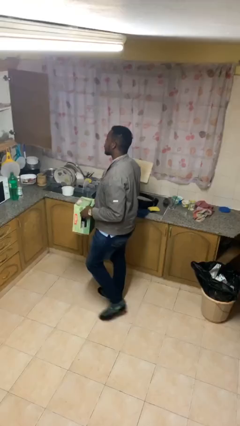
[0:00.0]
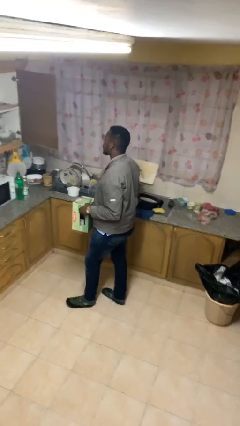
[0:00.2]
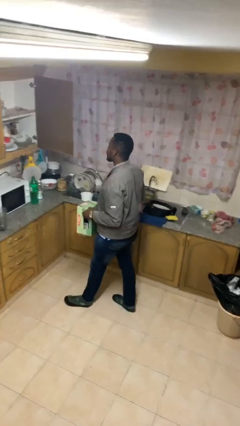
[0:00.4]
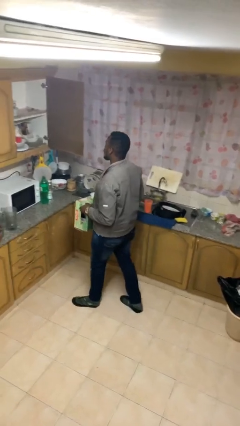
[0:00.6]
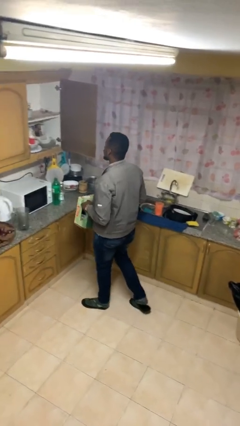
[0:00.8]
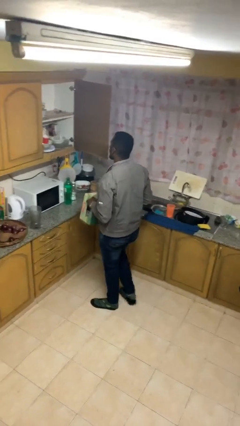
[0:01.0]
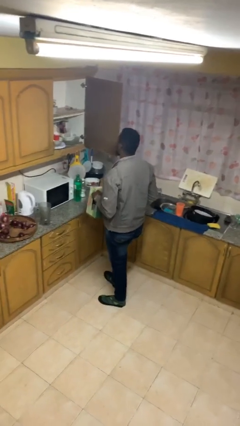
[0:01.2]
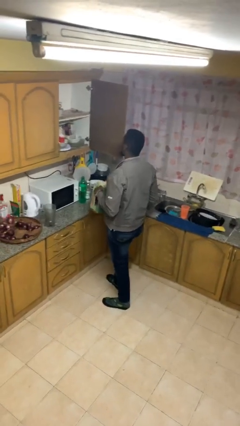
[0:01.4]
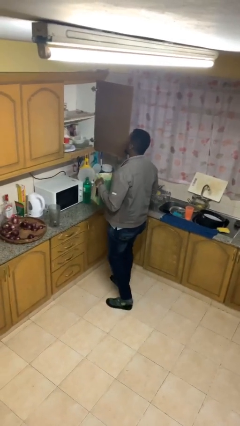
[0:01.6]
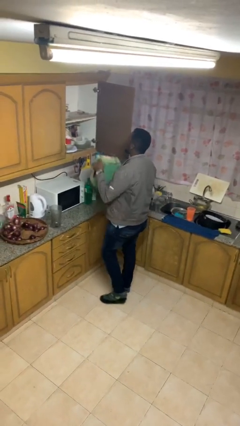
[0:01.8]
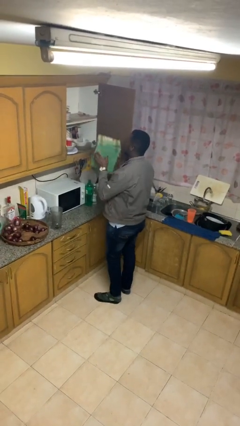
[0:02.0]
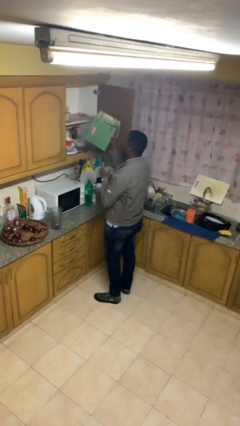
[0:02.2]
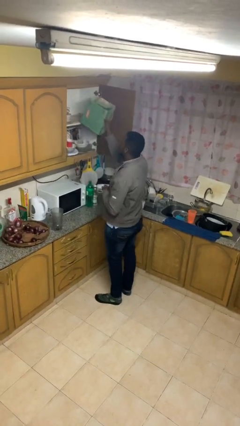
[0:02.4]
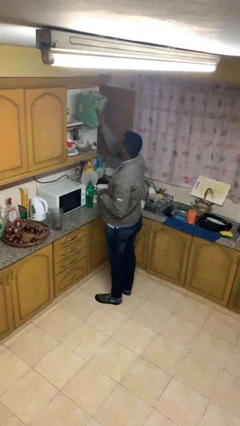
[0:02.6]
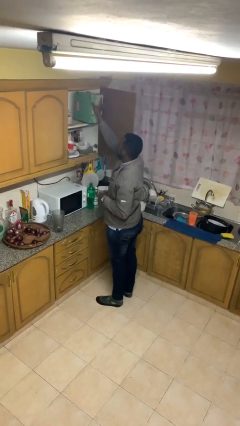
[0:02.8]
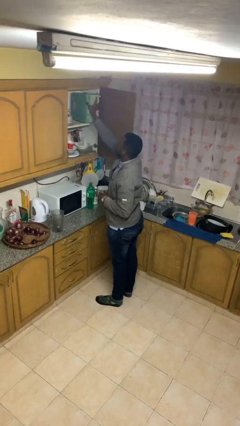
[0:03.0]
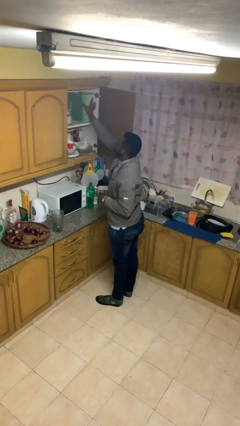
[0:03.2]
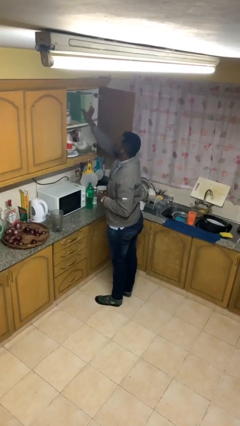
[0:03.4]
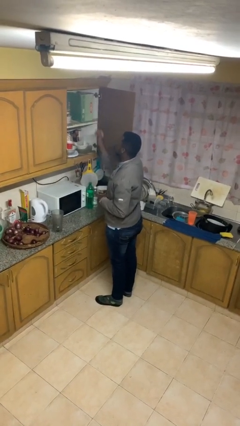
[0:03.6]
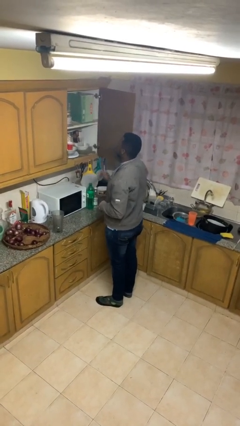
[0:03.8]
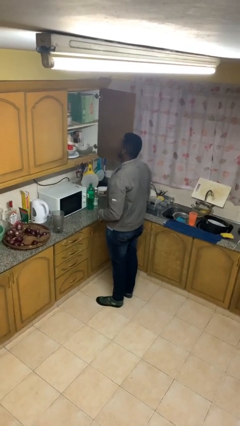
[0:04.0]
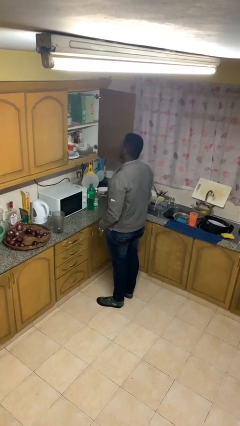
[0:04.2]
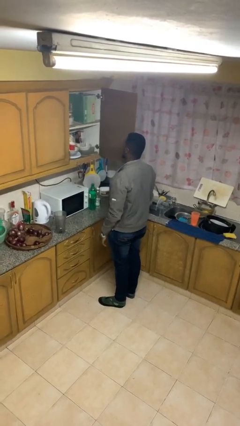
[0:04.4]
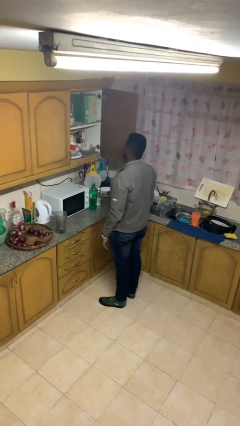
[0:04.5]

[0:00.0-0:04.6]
person puts down object on shelf

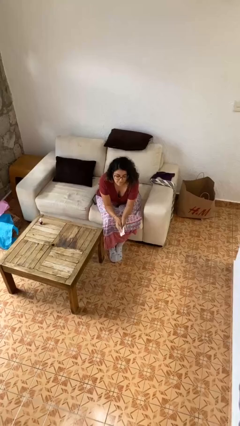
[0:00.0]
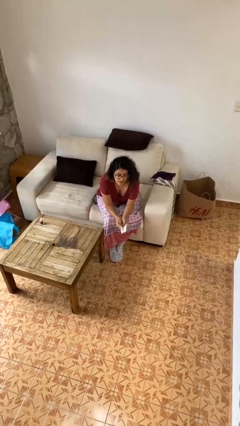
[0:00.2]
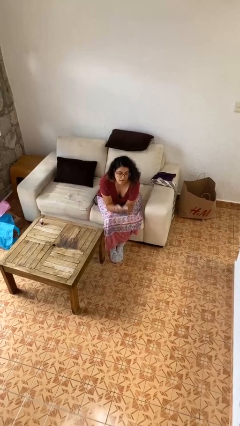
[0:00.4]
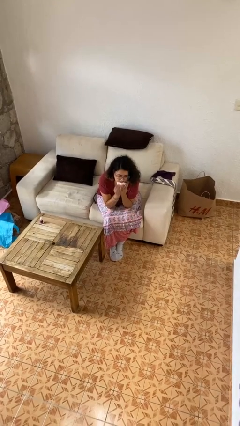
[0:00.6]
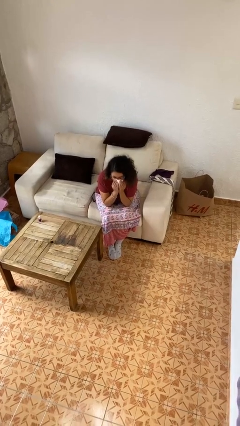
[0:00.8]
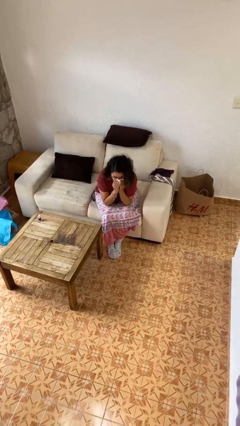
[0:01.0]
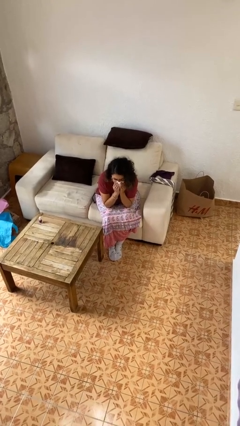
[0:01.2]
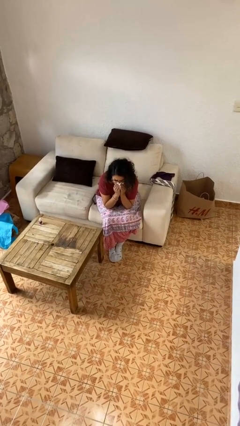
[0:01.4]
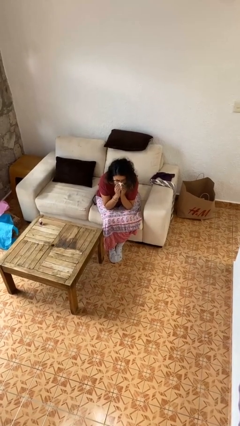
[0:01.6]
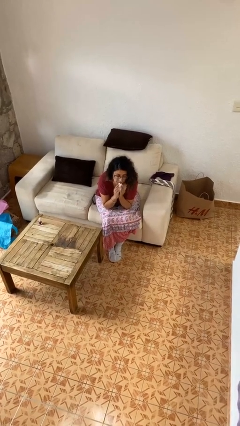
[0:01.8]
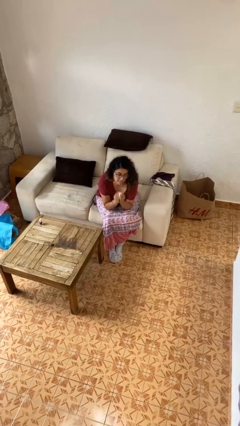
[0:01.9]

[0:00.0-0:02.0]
person blows nose

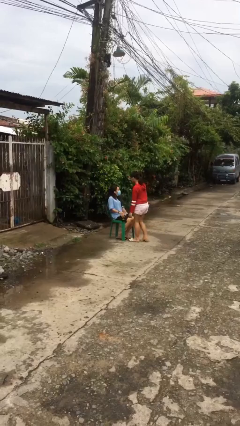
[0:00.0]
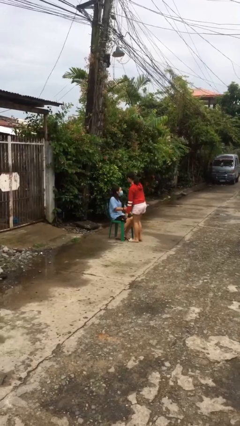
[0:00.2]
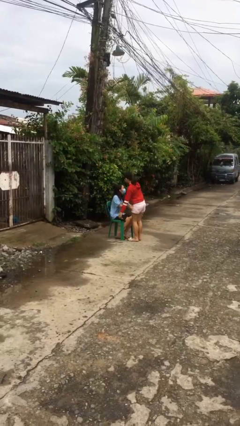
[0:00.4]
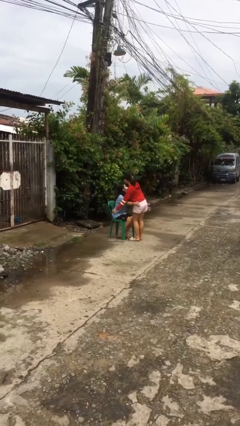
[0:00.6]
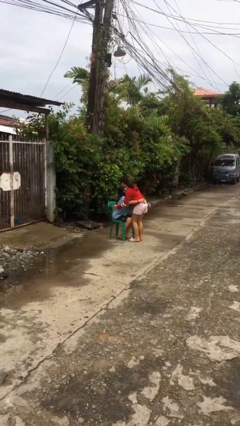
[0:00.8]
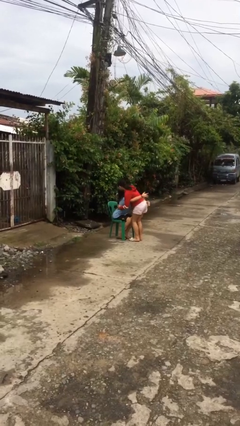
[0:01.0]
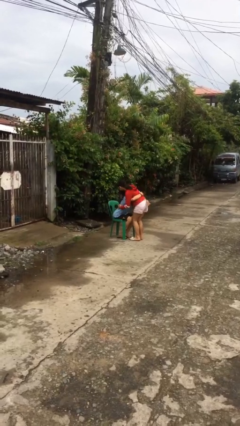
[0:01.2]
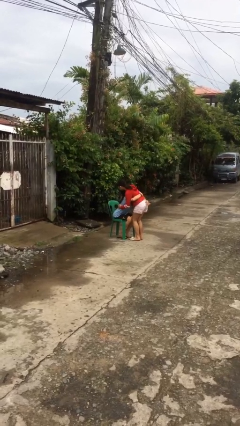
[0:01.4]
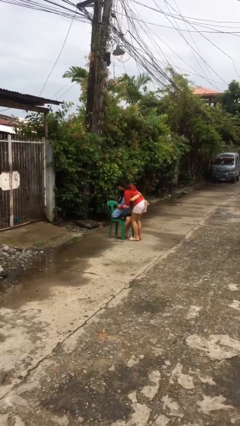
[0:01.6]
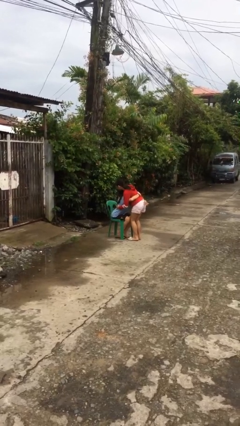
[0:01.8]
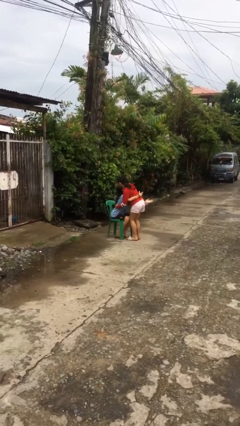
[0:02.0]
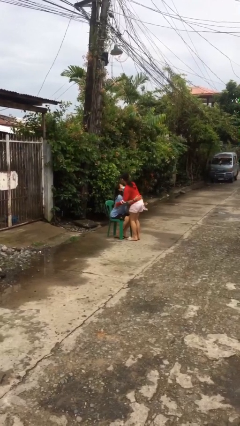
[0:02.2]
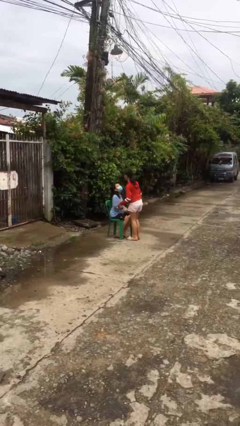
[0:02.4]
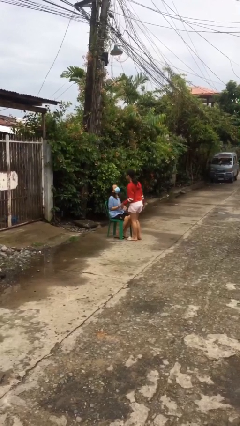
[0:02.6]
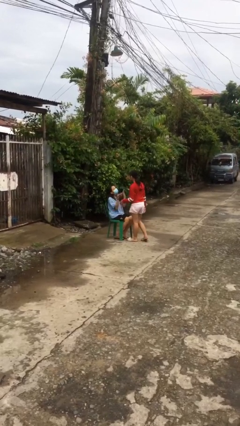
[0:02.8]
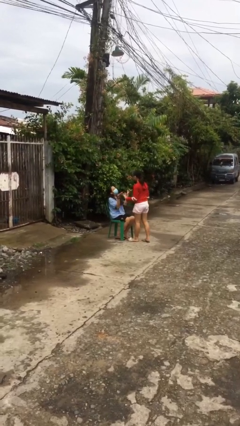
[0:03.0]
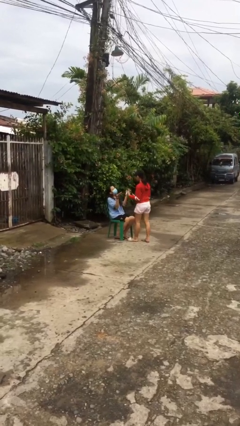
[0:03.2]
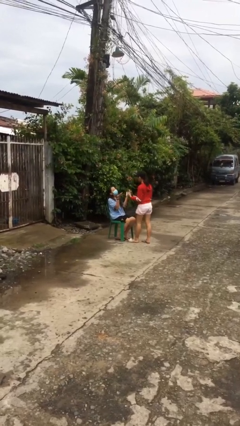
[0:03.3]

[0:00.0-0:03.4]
person embraces person

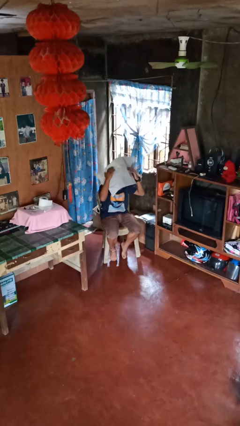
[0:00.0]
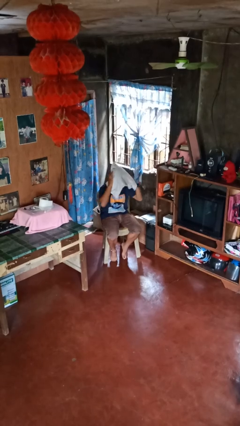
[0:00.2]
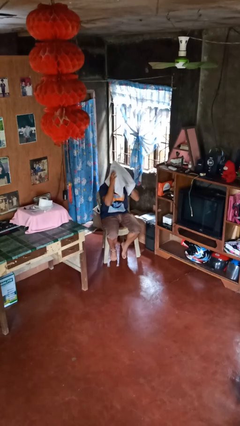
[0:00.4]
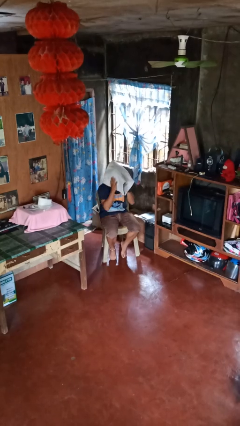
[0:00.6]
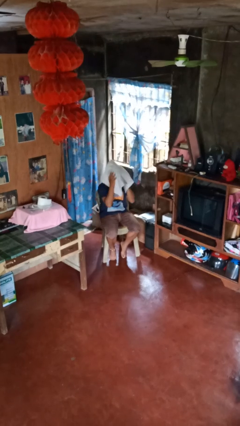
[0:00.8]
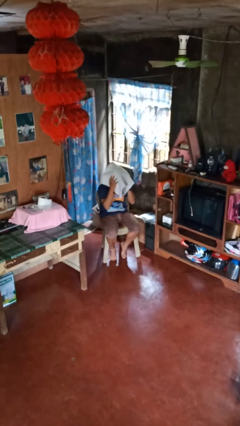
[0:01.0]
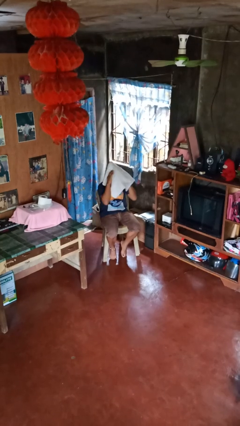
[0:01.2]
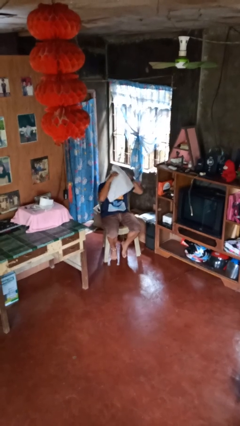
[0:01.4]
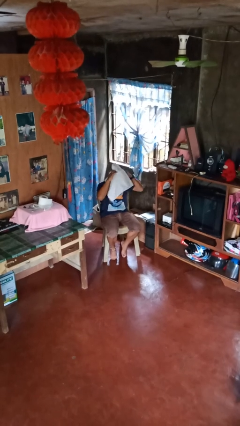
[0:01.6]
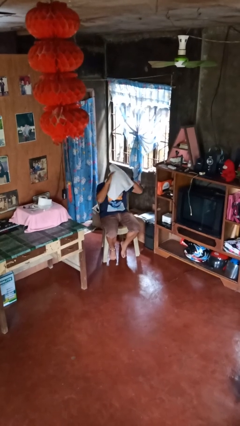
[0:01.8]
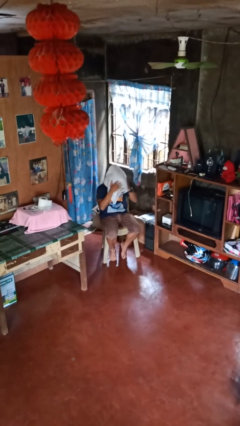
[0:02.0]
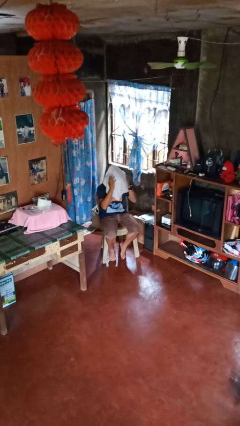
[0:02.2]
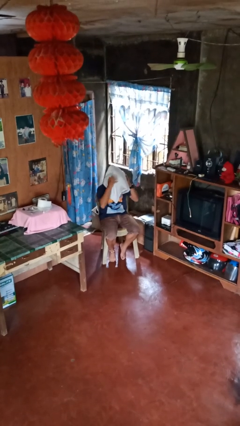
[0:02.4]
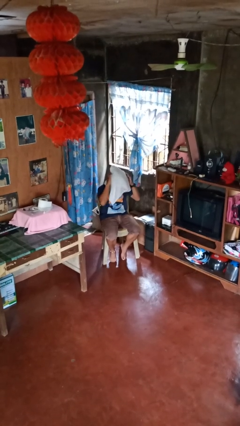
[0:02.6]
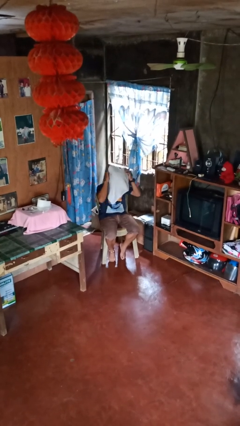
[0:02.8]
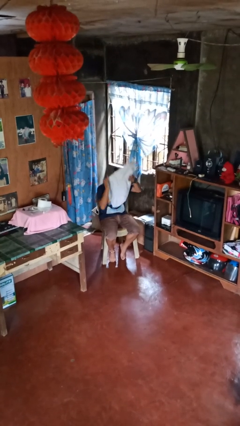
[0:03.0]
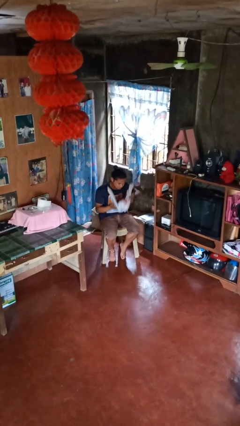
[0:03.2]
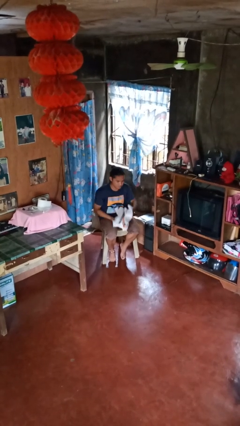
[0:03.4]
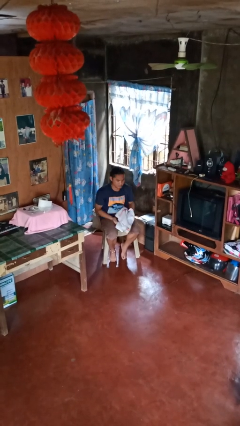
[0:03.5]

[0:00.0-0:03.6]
person dries hair with towel

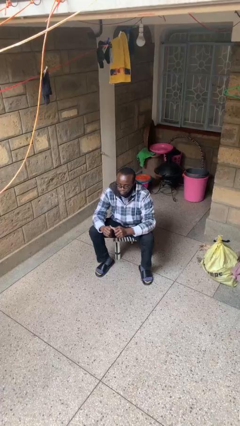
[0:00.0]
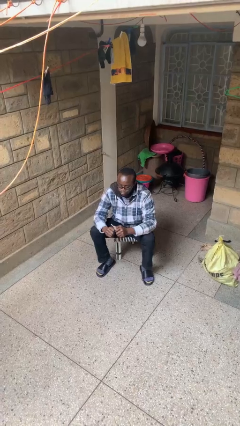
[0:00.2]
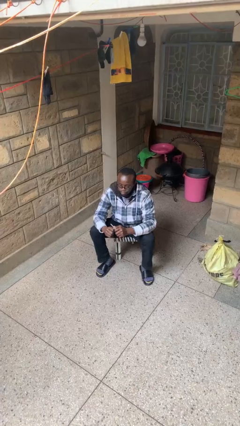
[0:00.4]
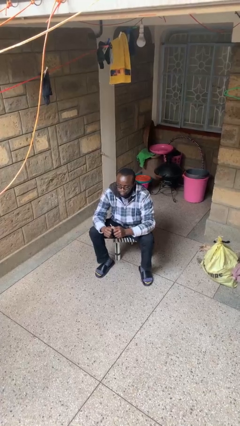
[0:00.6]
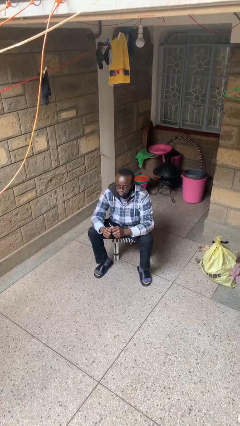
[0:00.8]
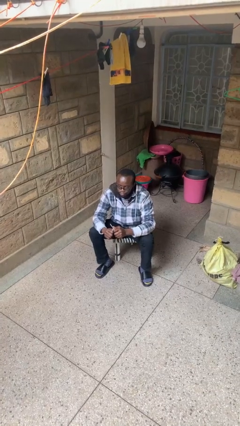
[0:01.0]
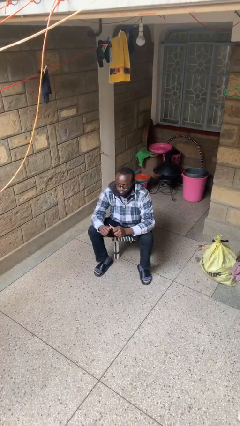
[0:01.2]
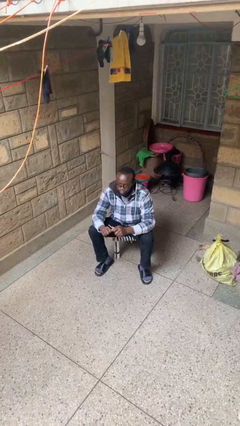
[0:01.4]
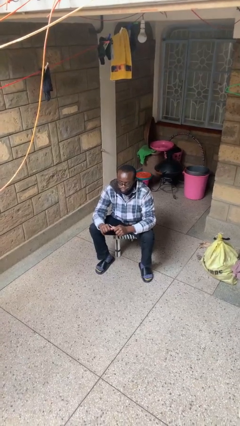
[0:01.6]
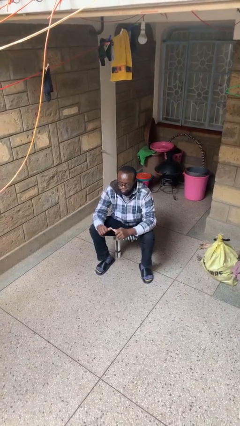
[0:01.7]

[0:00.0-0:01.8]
person files fingernails

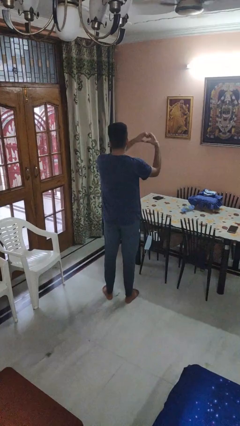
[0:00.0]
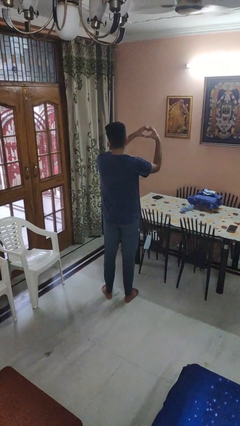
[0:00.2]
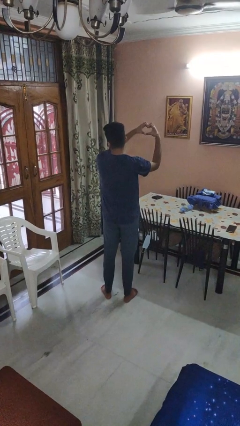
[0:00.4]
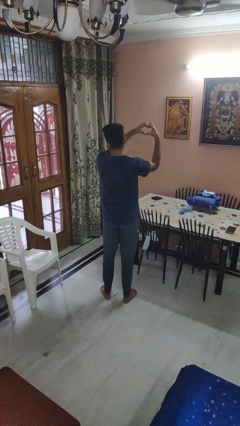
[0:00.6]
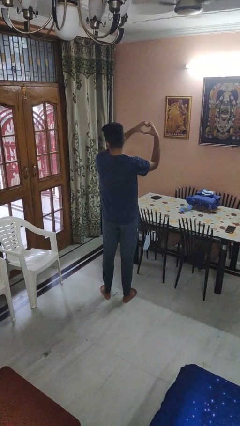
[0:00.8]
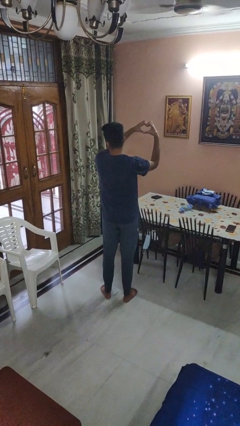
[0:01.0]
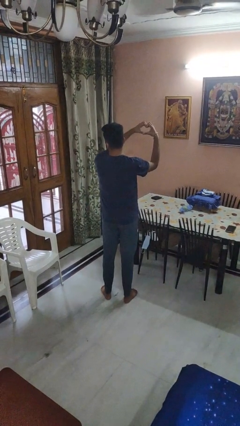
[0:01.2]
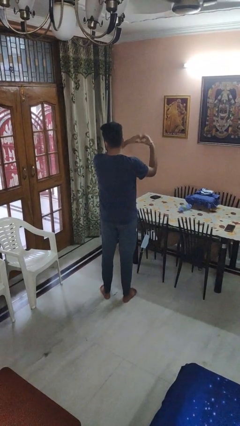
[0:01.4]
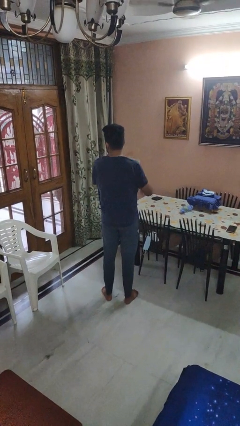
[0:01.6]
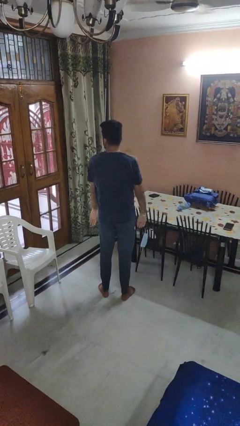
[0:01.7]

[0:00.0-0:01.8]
person gestures heart

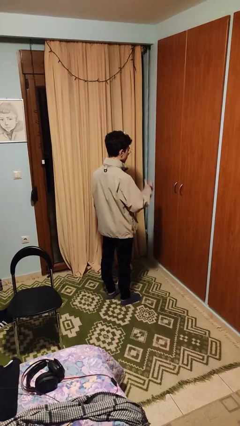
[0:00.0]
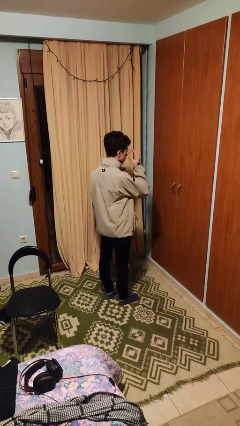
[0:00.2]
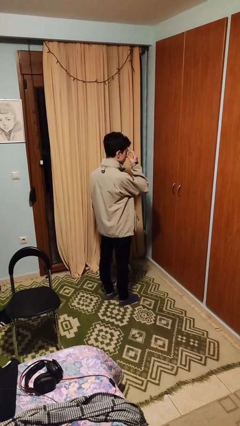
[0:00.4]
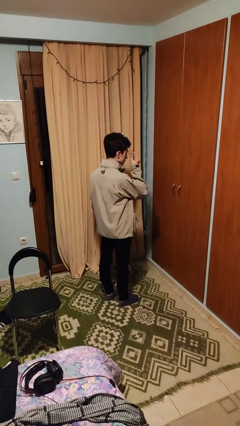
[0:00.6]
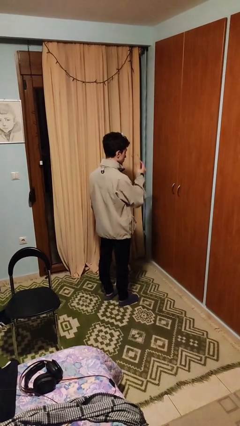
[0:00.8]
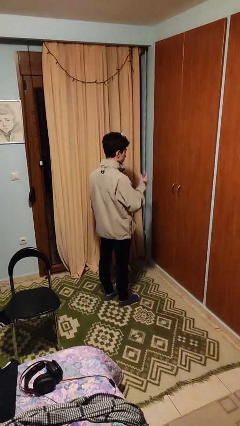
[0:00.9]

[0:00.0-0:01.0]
person takes off glasses
